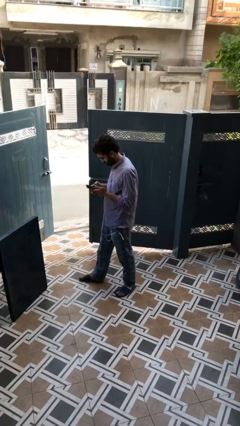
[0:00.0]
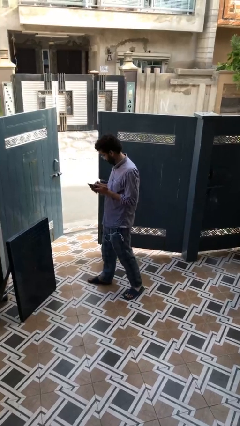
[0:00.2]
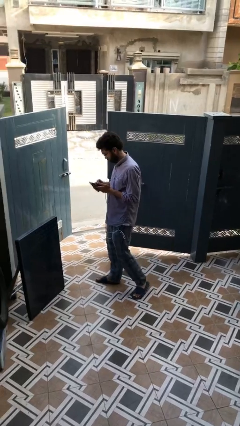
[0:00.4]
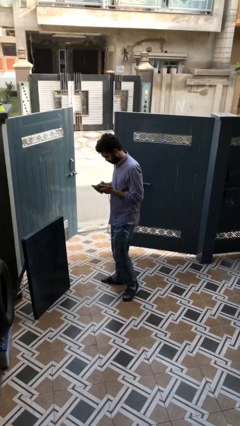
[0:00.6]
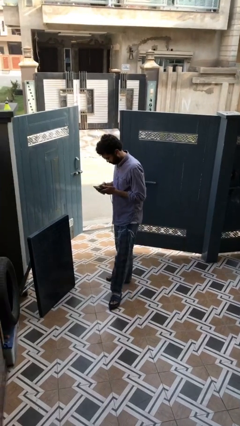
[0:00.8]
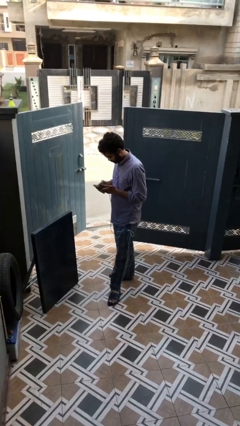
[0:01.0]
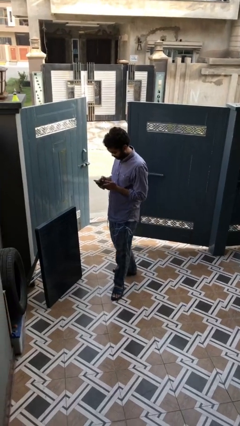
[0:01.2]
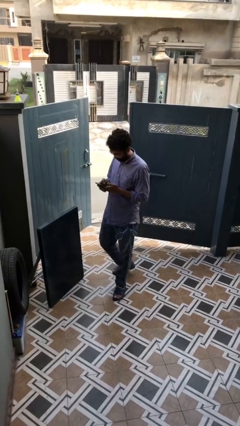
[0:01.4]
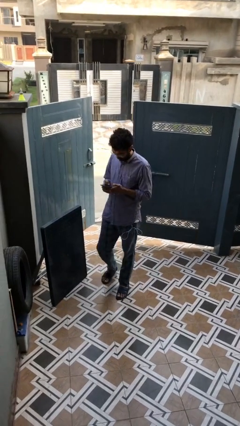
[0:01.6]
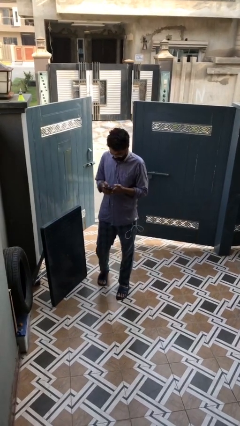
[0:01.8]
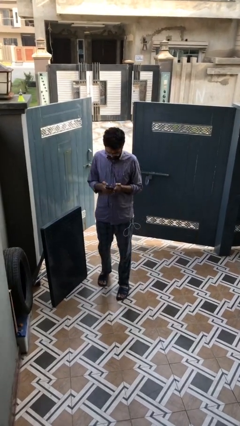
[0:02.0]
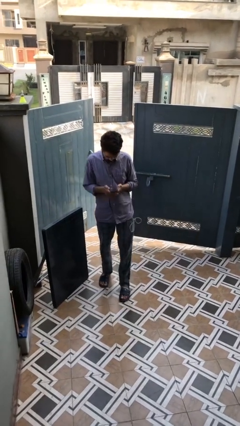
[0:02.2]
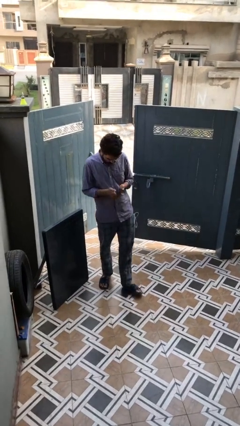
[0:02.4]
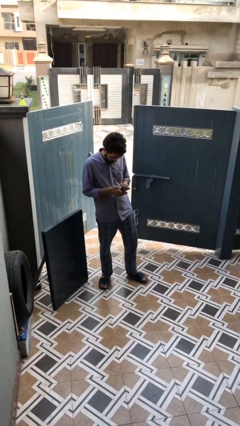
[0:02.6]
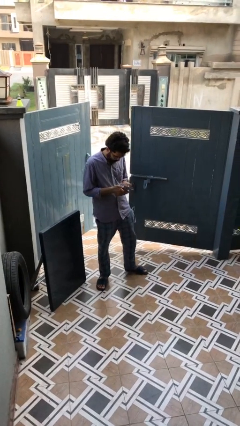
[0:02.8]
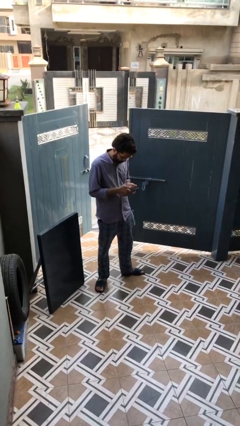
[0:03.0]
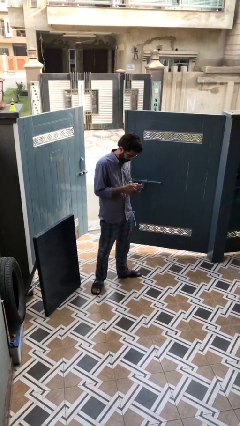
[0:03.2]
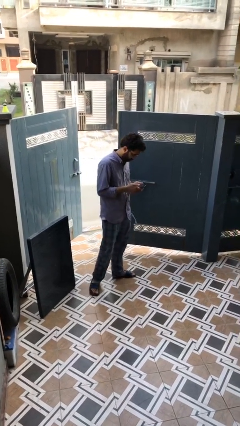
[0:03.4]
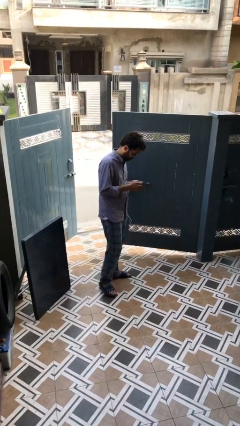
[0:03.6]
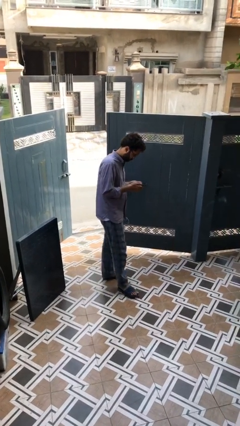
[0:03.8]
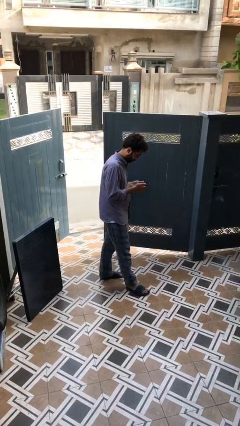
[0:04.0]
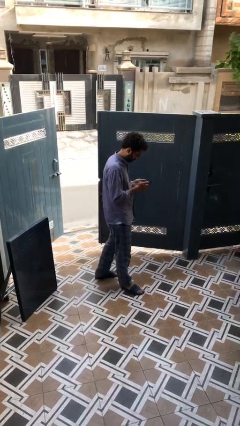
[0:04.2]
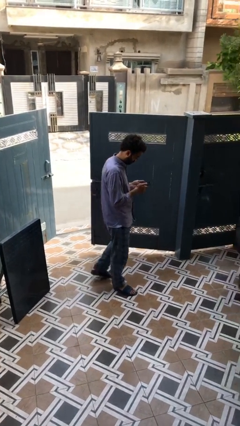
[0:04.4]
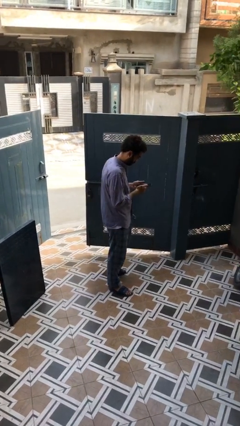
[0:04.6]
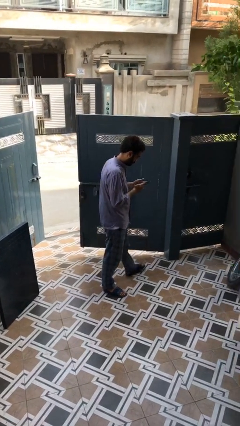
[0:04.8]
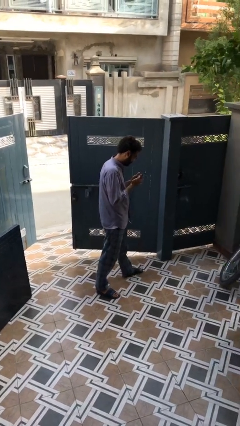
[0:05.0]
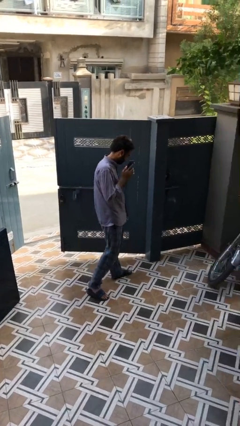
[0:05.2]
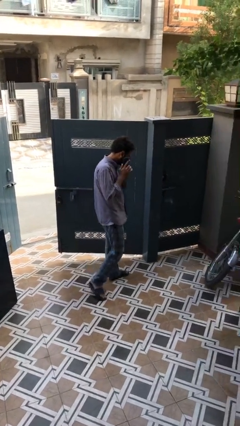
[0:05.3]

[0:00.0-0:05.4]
person texts on phone

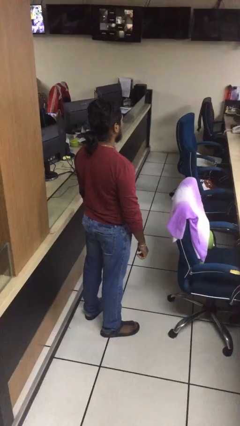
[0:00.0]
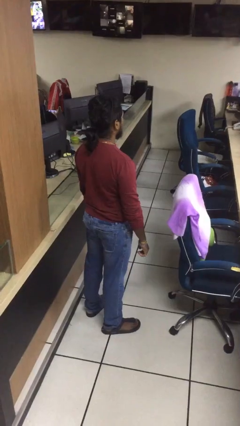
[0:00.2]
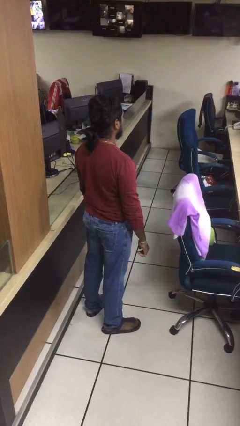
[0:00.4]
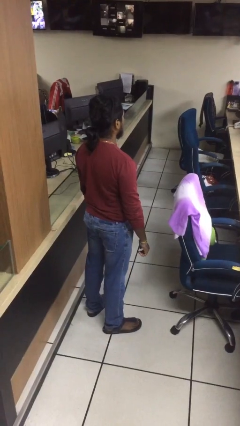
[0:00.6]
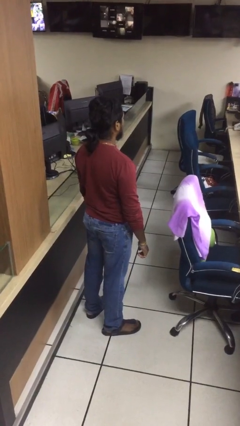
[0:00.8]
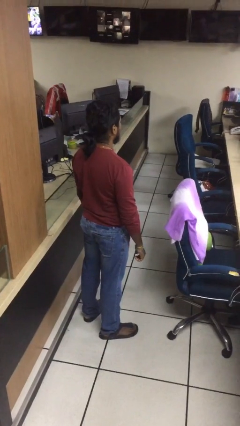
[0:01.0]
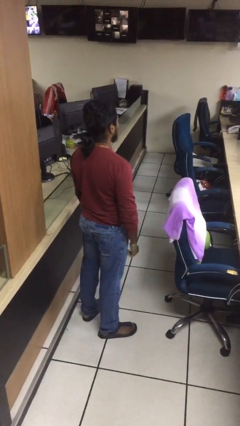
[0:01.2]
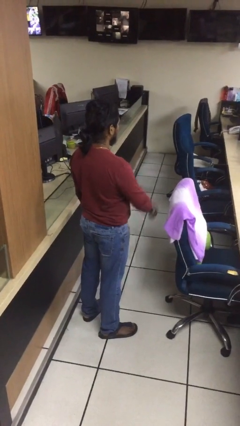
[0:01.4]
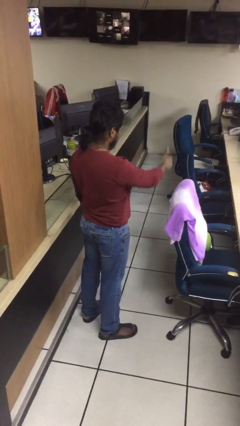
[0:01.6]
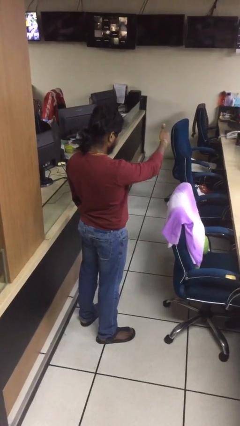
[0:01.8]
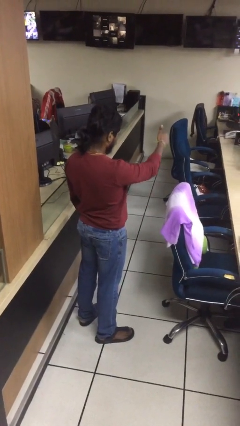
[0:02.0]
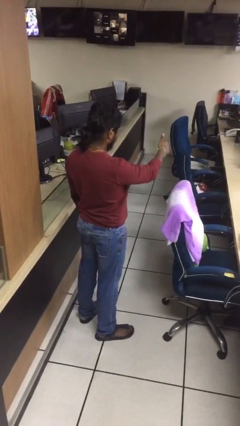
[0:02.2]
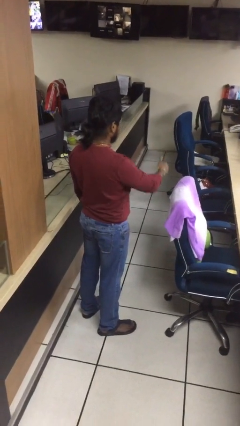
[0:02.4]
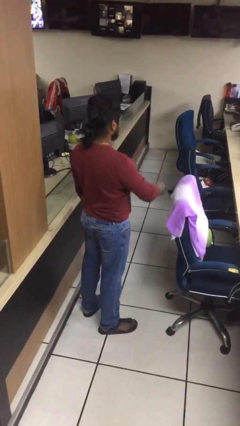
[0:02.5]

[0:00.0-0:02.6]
person gestures thumbs up

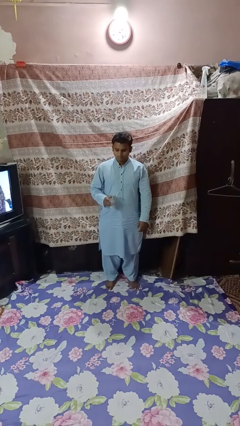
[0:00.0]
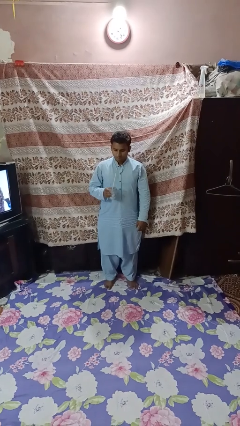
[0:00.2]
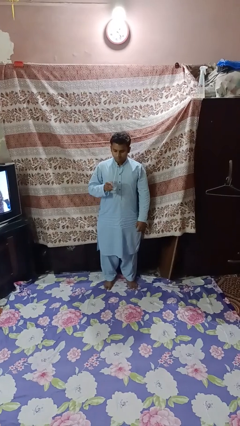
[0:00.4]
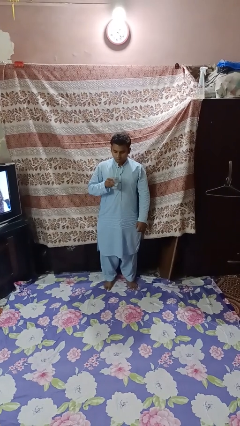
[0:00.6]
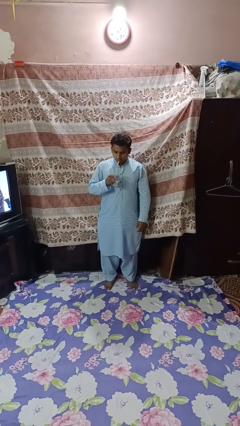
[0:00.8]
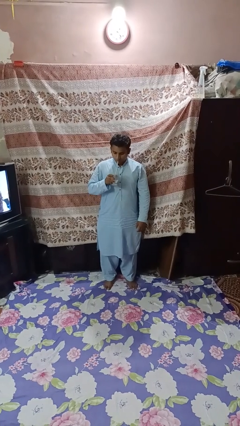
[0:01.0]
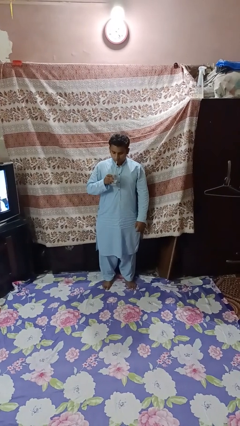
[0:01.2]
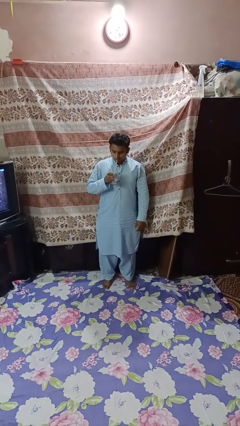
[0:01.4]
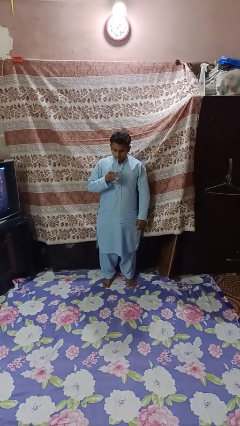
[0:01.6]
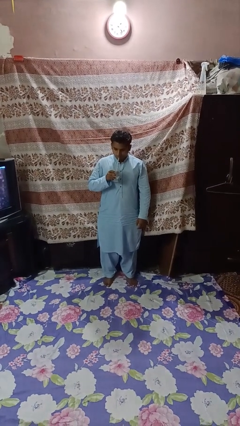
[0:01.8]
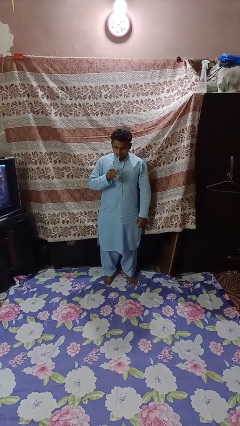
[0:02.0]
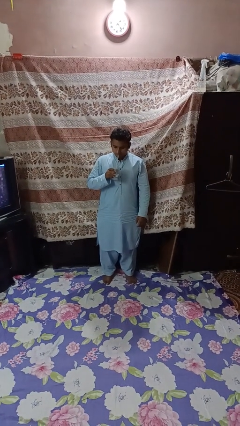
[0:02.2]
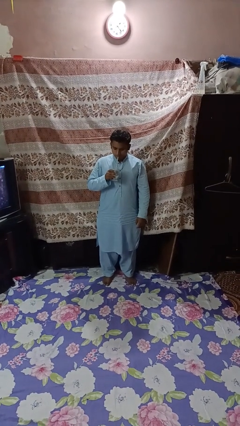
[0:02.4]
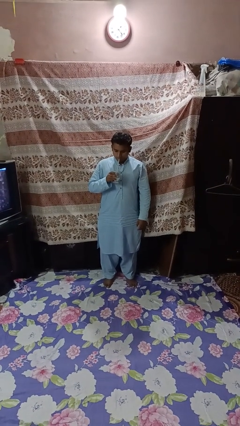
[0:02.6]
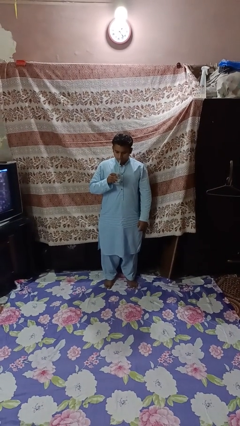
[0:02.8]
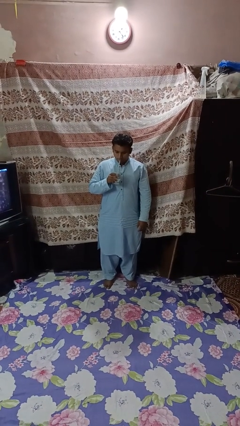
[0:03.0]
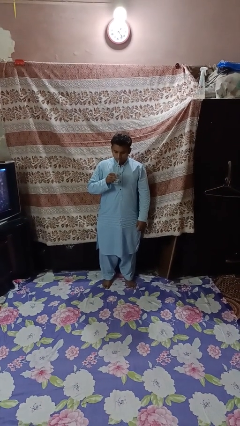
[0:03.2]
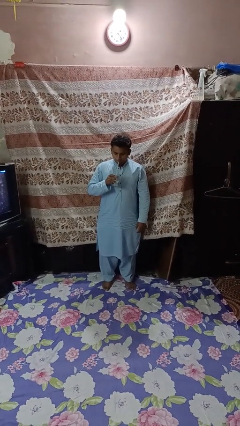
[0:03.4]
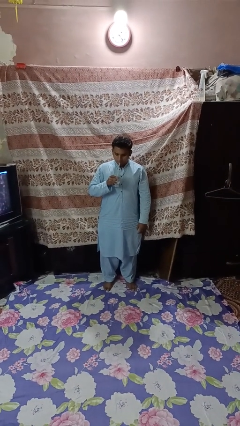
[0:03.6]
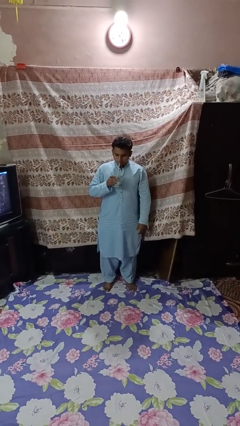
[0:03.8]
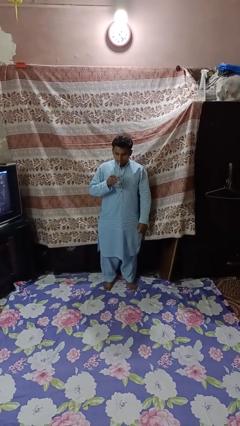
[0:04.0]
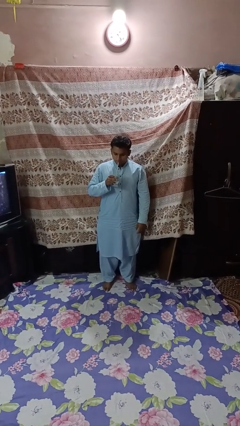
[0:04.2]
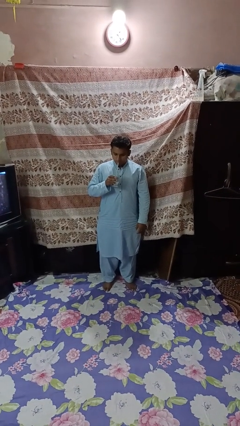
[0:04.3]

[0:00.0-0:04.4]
person drinks from straw

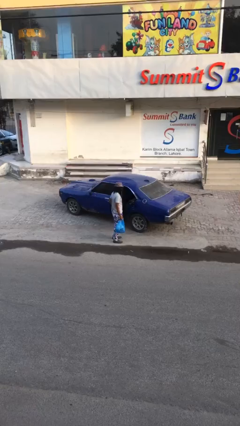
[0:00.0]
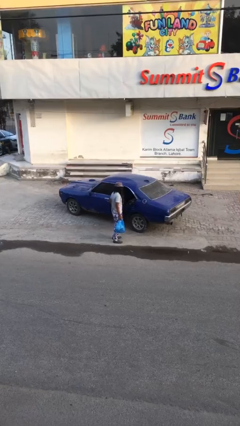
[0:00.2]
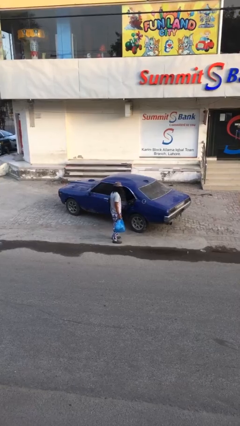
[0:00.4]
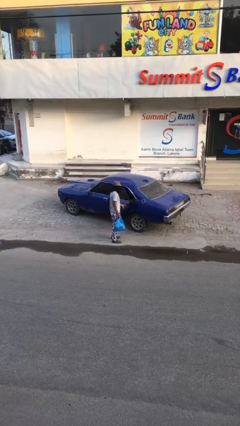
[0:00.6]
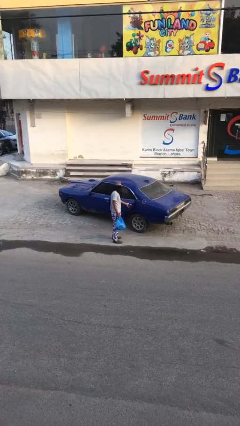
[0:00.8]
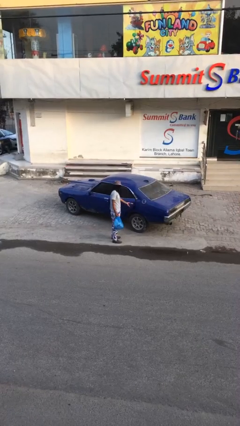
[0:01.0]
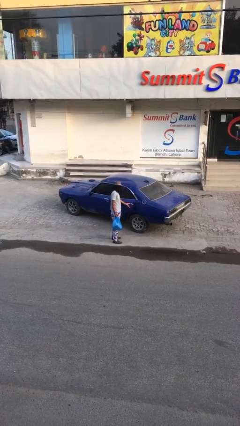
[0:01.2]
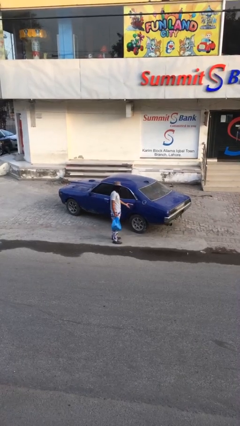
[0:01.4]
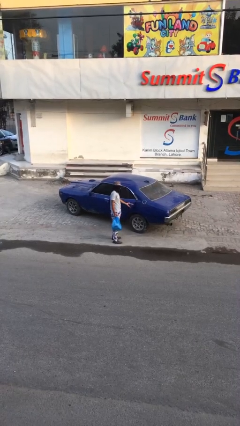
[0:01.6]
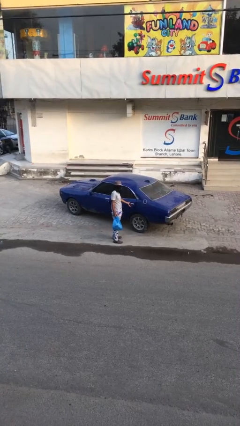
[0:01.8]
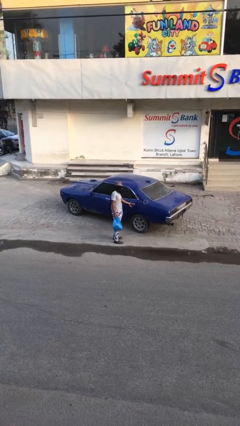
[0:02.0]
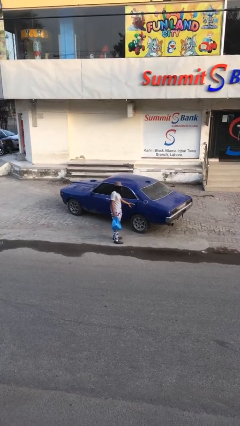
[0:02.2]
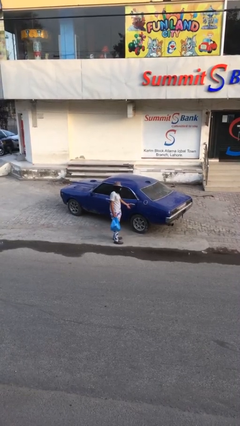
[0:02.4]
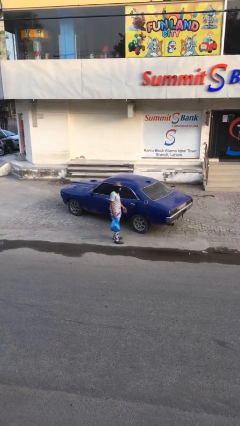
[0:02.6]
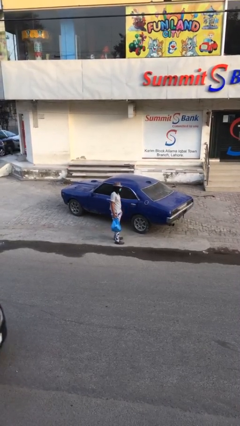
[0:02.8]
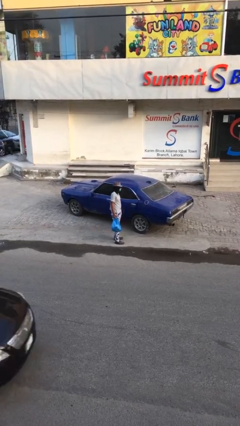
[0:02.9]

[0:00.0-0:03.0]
person closes car door

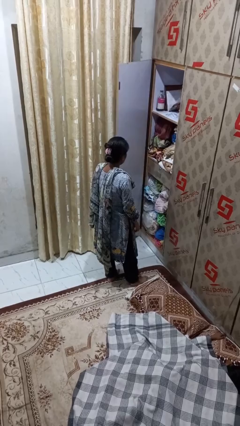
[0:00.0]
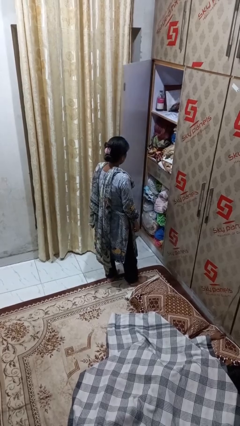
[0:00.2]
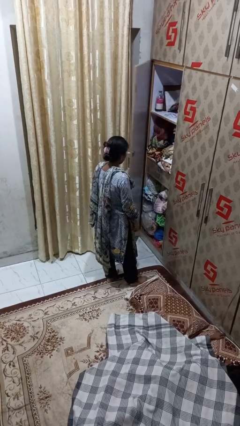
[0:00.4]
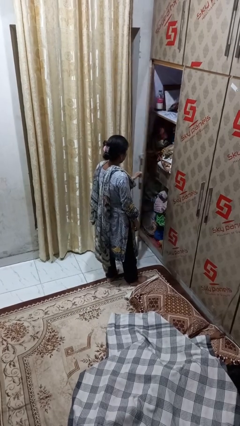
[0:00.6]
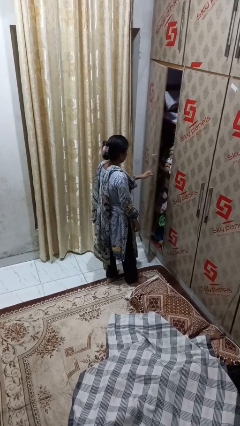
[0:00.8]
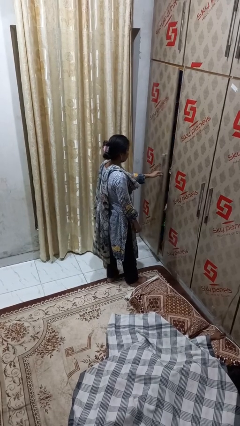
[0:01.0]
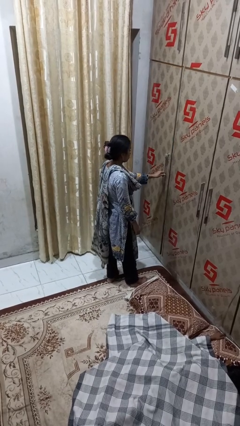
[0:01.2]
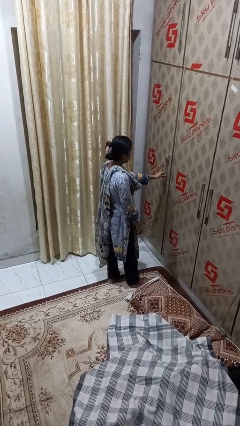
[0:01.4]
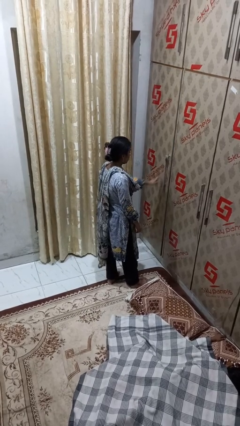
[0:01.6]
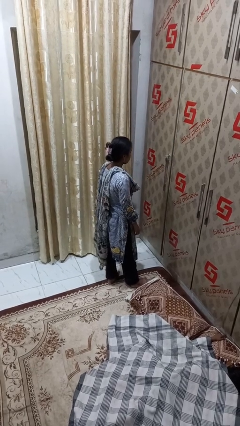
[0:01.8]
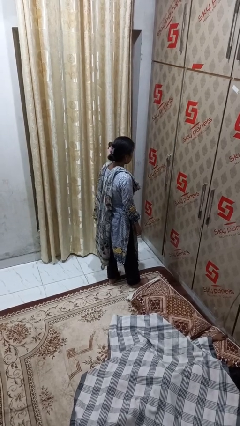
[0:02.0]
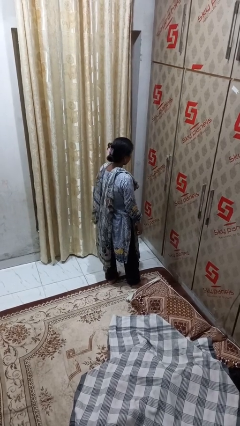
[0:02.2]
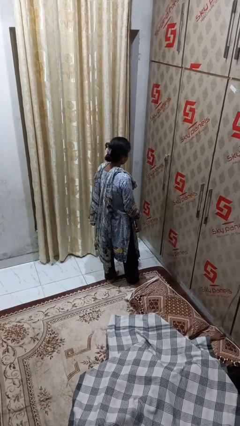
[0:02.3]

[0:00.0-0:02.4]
person closes closet door
